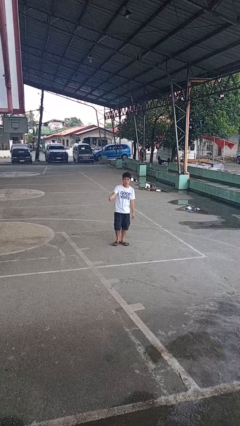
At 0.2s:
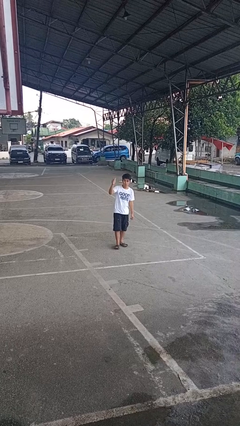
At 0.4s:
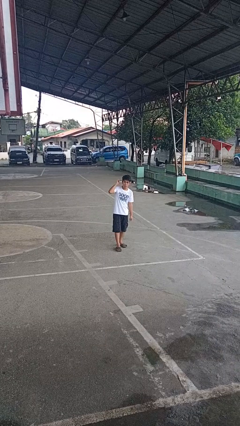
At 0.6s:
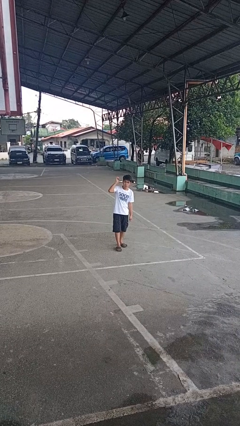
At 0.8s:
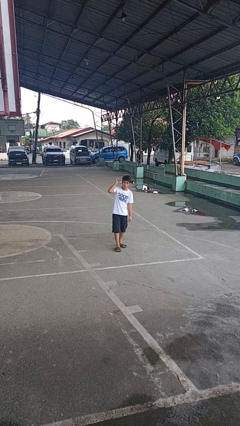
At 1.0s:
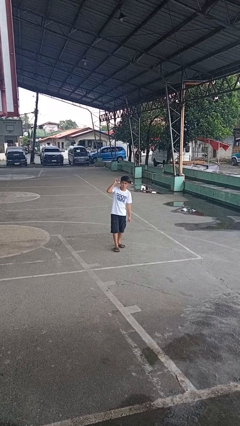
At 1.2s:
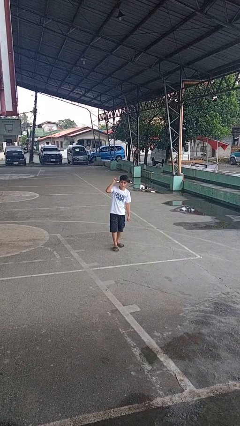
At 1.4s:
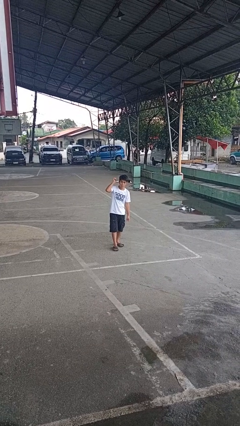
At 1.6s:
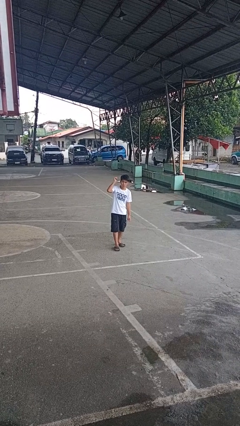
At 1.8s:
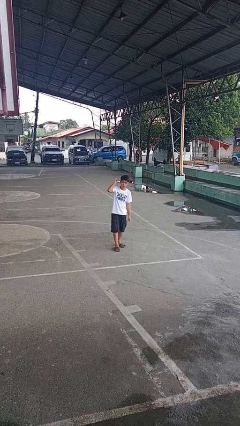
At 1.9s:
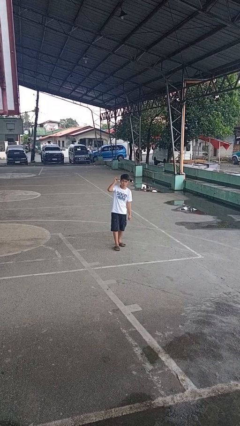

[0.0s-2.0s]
person gestures behind me

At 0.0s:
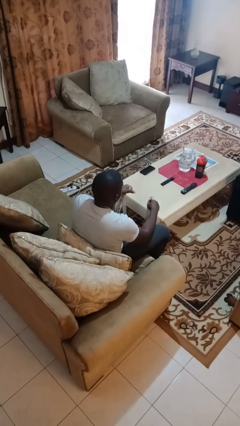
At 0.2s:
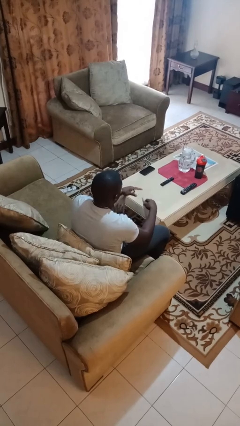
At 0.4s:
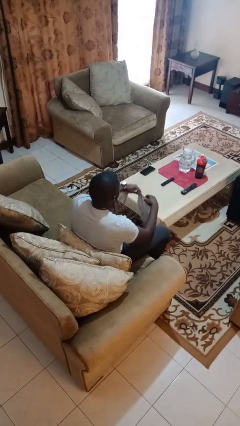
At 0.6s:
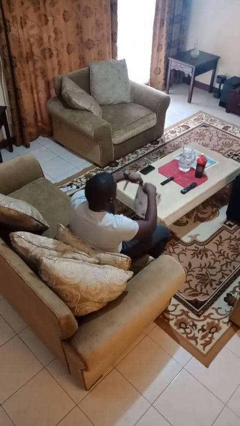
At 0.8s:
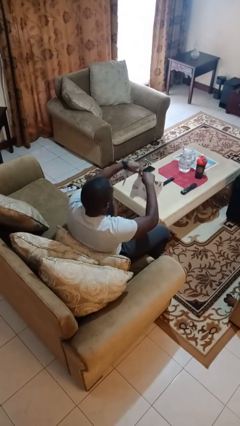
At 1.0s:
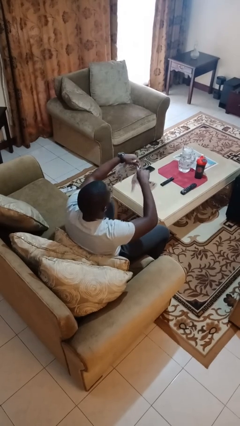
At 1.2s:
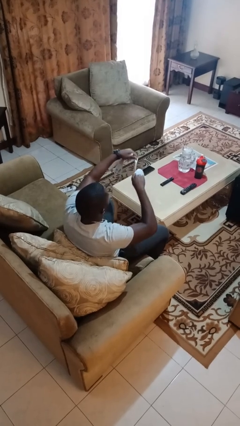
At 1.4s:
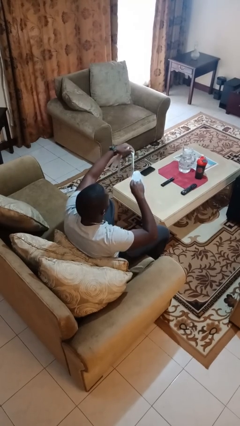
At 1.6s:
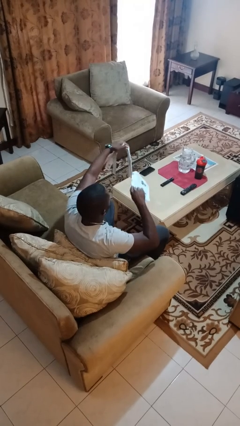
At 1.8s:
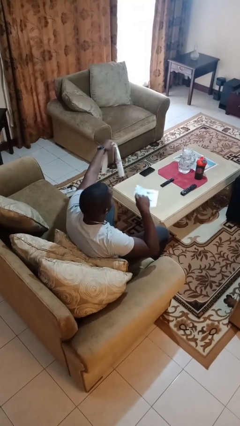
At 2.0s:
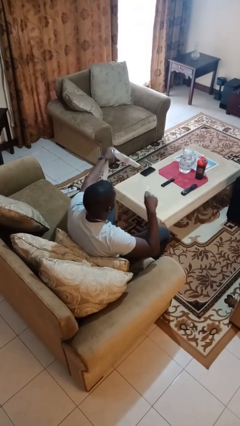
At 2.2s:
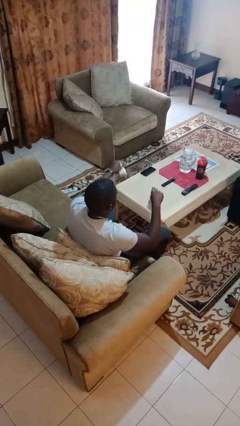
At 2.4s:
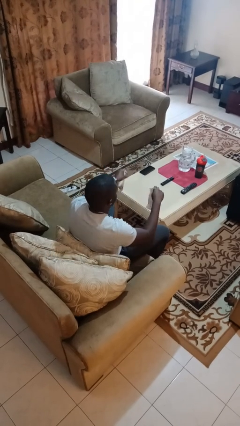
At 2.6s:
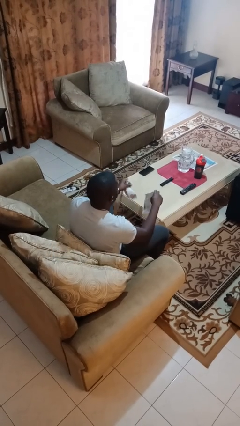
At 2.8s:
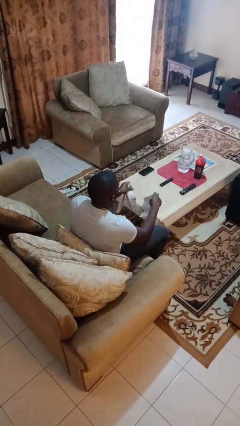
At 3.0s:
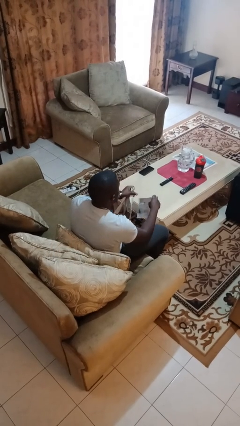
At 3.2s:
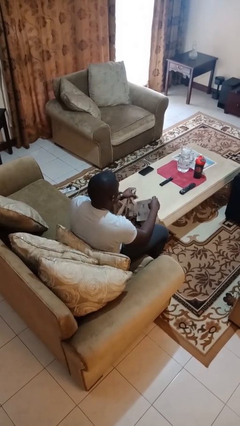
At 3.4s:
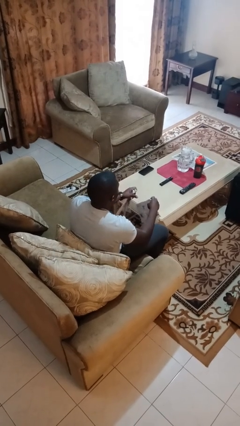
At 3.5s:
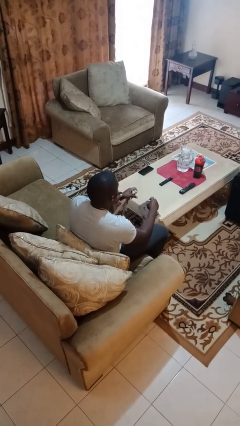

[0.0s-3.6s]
person tears paper

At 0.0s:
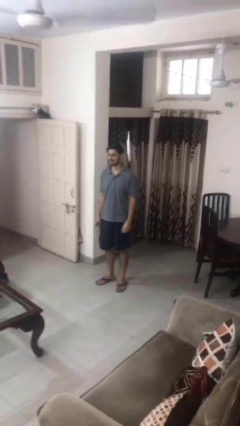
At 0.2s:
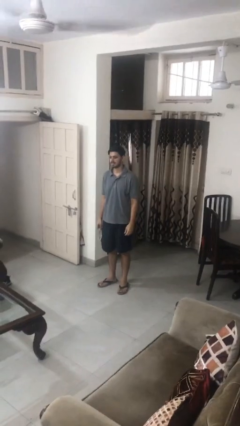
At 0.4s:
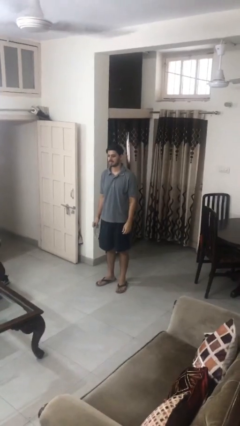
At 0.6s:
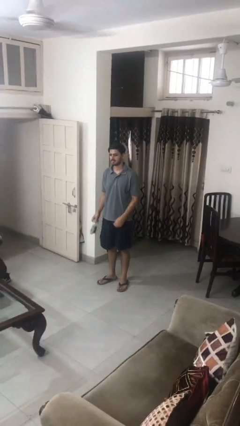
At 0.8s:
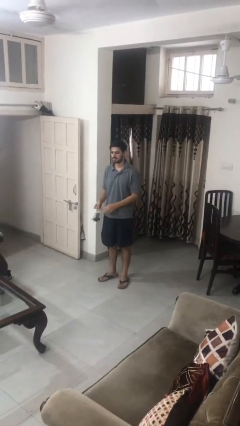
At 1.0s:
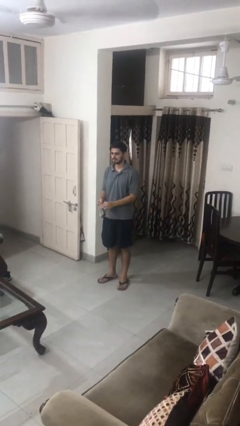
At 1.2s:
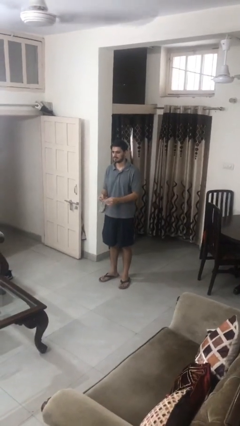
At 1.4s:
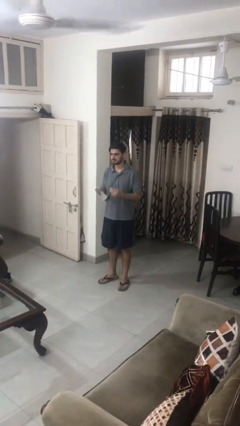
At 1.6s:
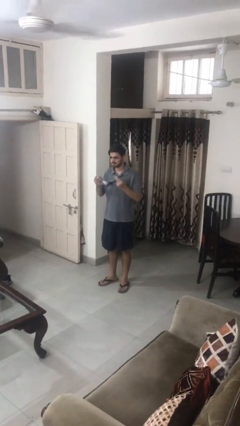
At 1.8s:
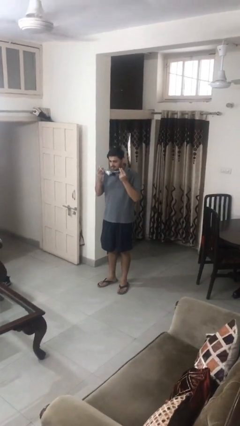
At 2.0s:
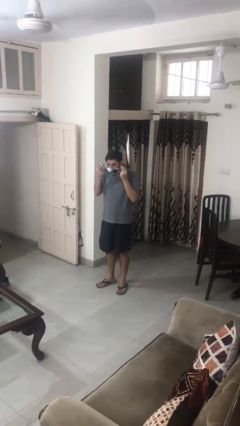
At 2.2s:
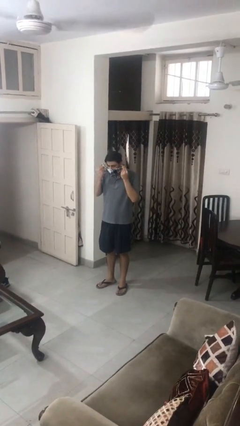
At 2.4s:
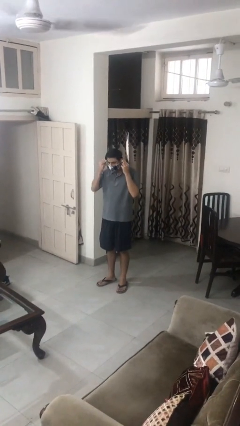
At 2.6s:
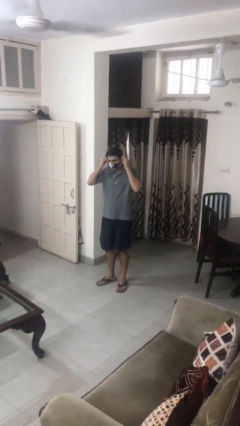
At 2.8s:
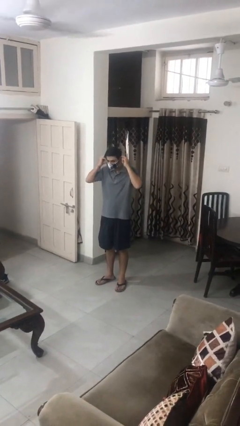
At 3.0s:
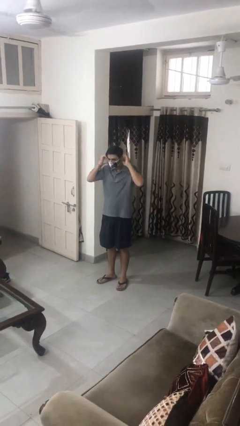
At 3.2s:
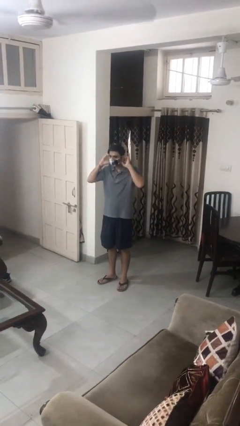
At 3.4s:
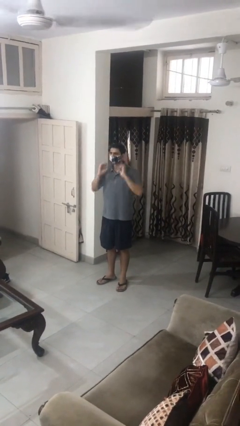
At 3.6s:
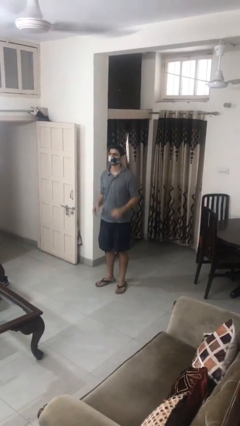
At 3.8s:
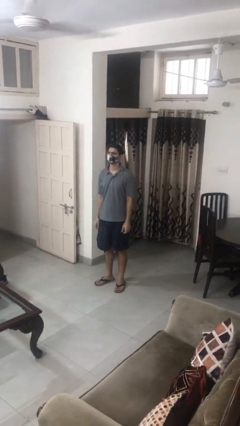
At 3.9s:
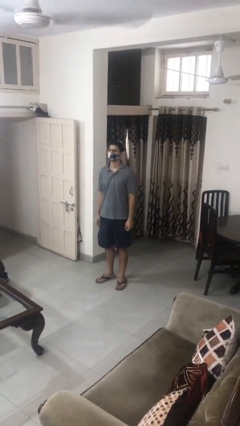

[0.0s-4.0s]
person puts on facemask

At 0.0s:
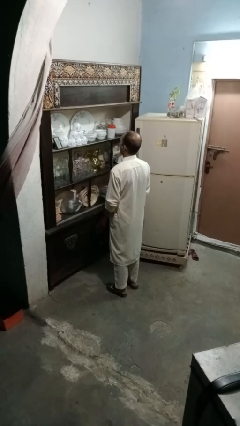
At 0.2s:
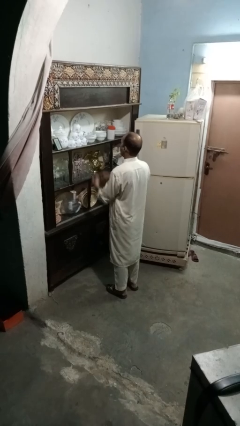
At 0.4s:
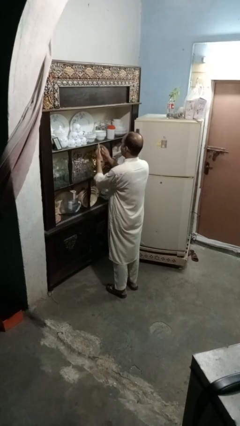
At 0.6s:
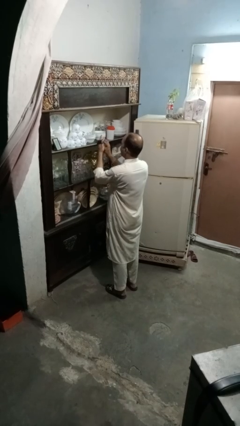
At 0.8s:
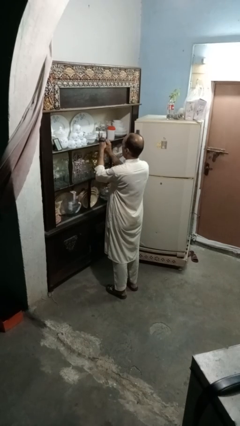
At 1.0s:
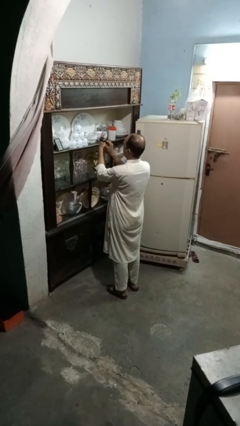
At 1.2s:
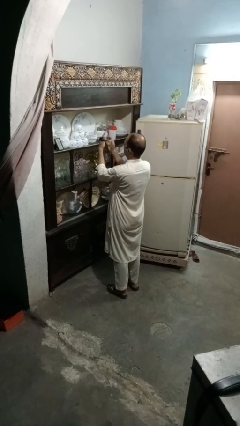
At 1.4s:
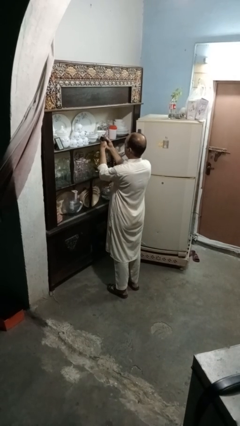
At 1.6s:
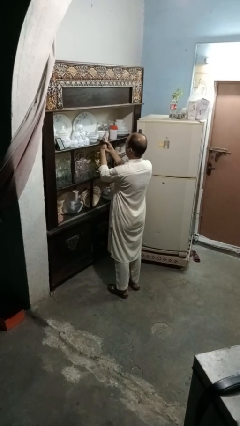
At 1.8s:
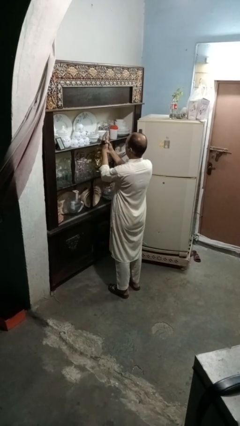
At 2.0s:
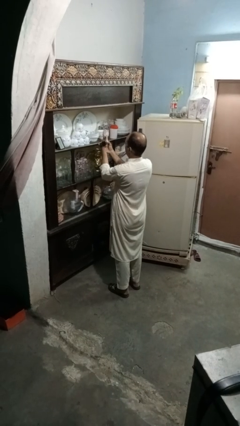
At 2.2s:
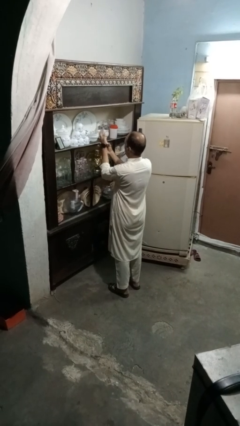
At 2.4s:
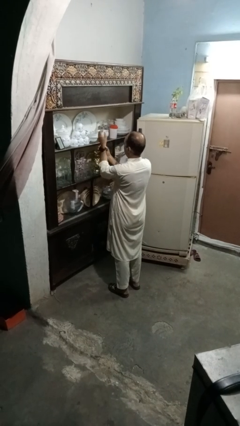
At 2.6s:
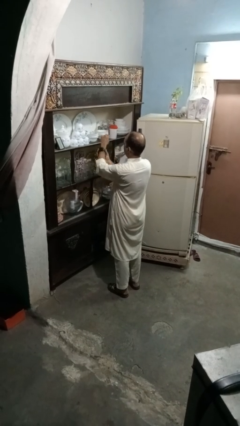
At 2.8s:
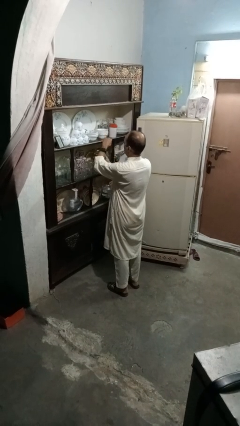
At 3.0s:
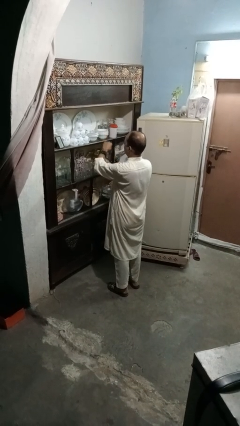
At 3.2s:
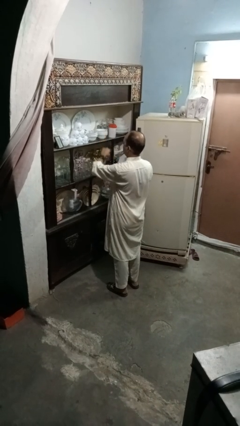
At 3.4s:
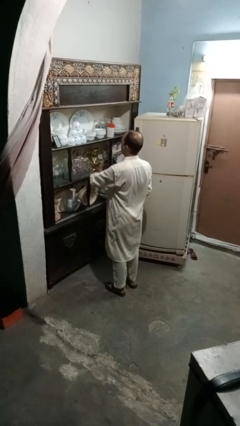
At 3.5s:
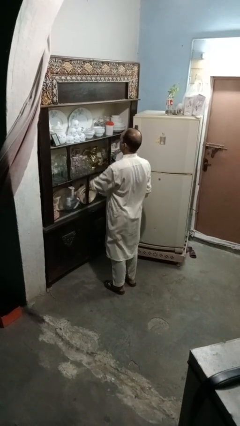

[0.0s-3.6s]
person puts on wristwatch

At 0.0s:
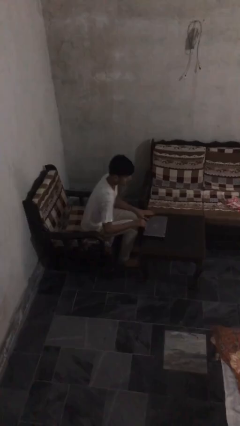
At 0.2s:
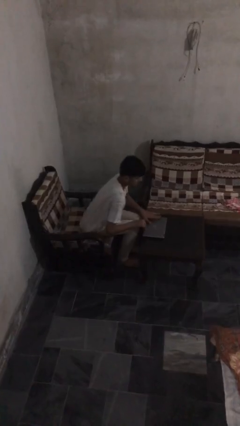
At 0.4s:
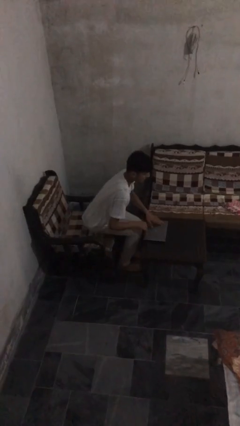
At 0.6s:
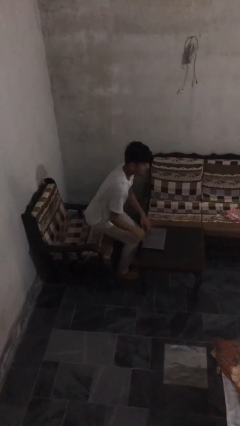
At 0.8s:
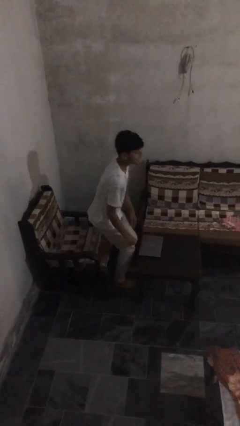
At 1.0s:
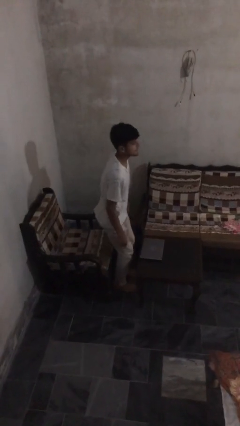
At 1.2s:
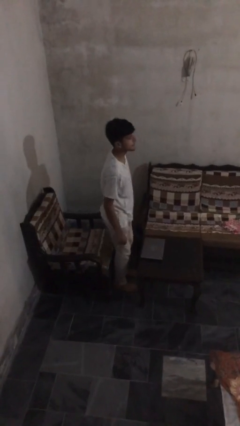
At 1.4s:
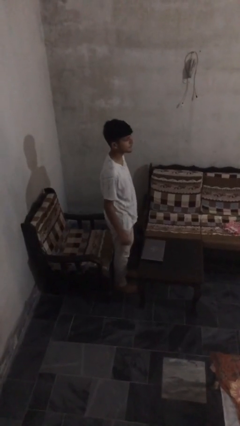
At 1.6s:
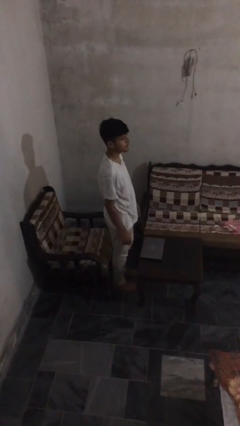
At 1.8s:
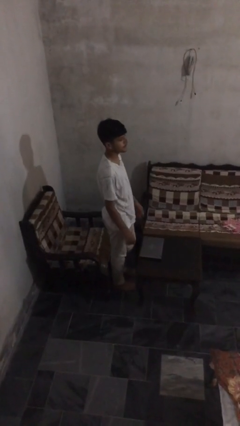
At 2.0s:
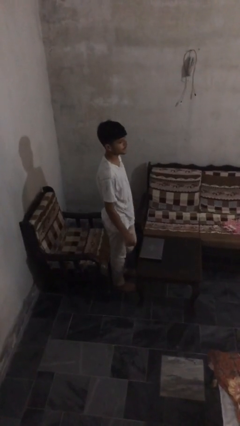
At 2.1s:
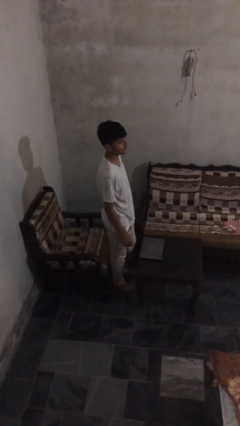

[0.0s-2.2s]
person stands up

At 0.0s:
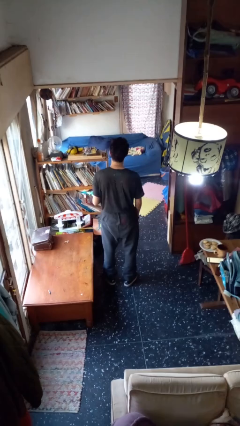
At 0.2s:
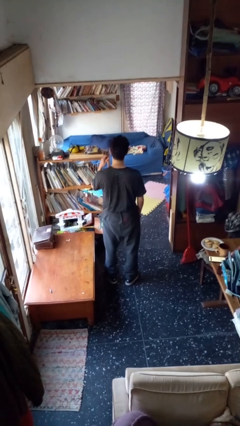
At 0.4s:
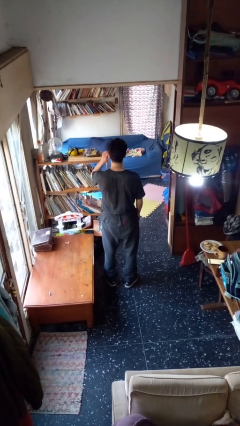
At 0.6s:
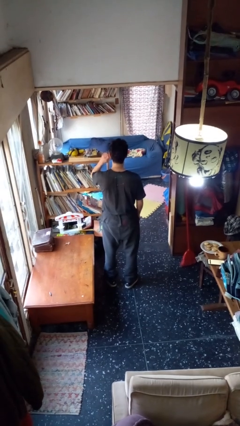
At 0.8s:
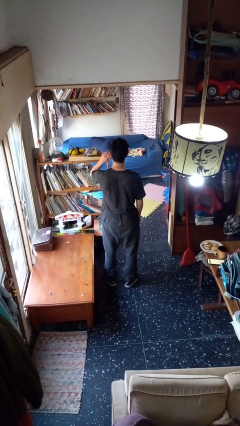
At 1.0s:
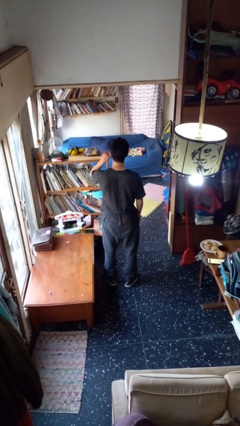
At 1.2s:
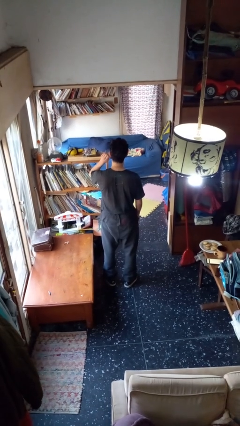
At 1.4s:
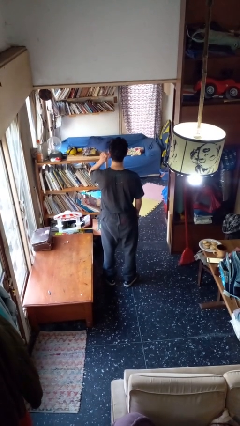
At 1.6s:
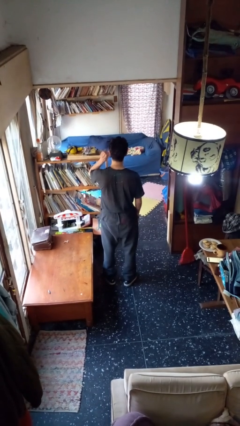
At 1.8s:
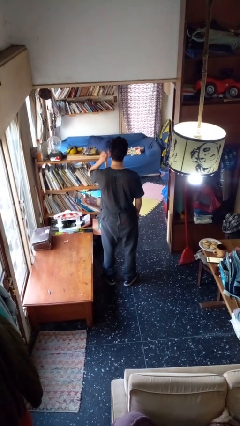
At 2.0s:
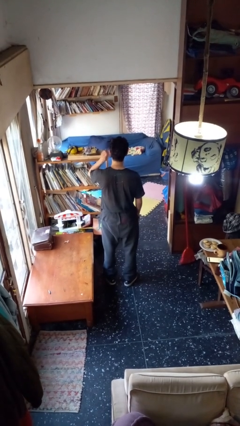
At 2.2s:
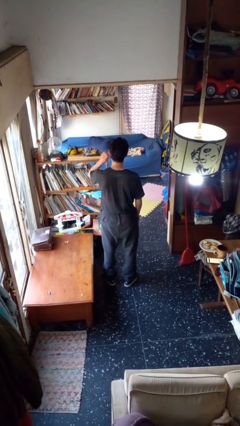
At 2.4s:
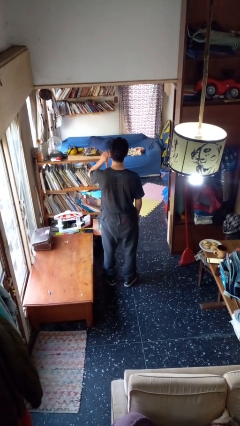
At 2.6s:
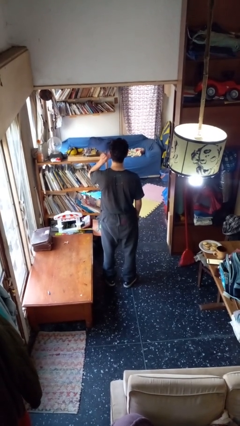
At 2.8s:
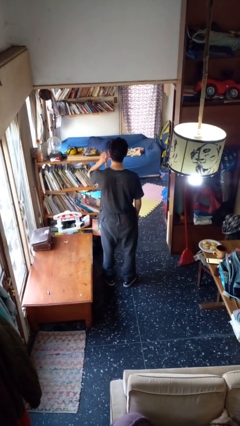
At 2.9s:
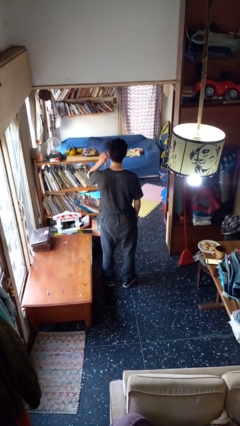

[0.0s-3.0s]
person touches earlobe
